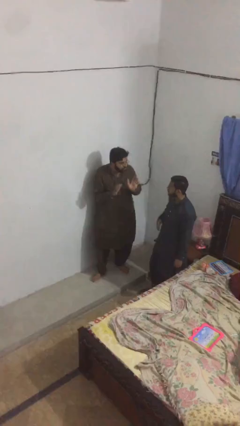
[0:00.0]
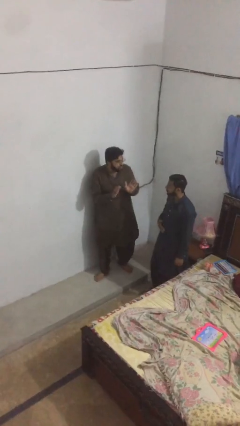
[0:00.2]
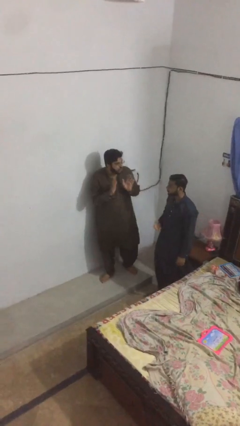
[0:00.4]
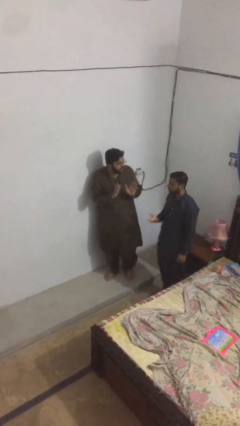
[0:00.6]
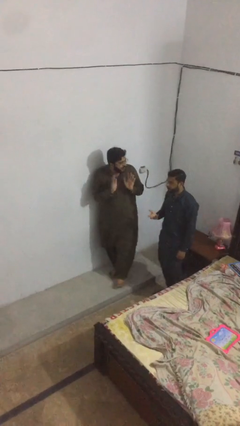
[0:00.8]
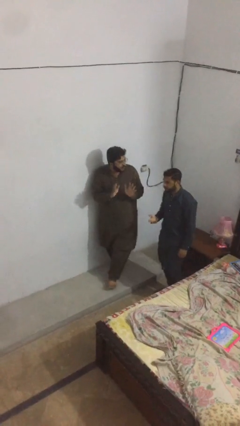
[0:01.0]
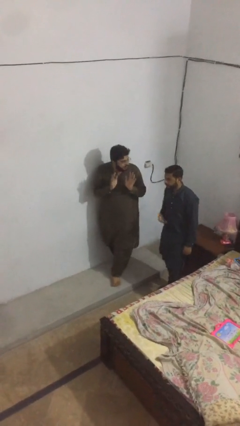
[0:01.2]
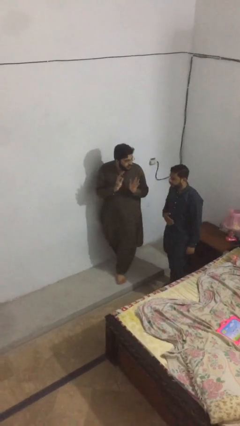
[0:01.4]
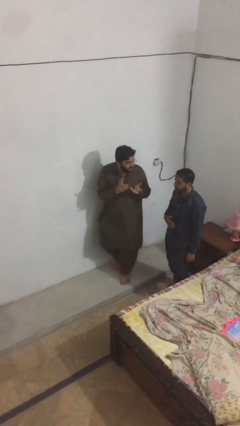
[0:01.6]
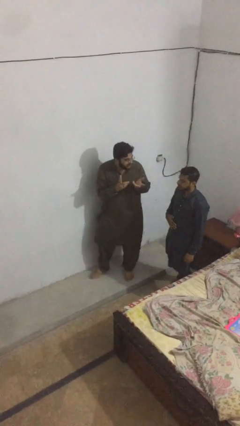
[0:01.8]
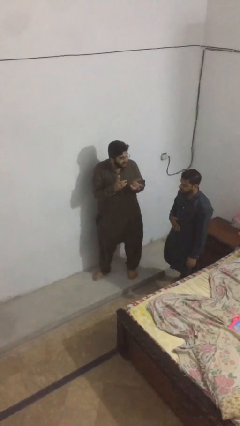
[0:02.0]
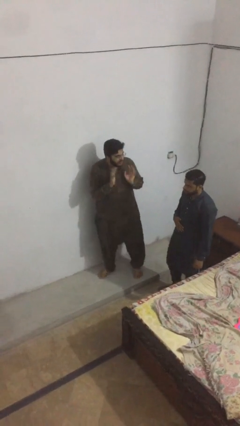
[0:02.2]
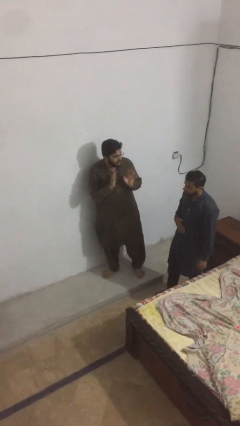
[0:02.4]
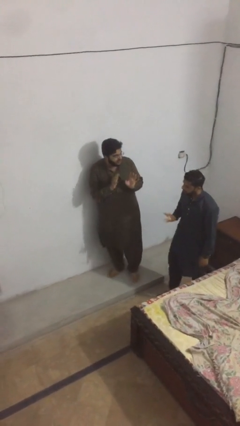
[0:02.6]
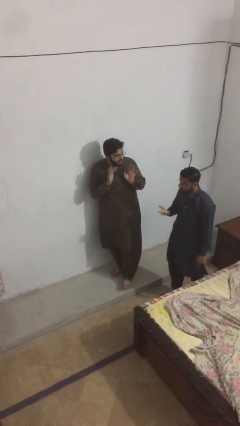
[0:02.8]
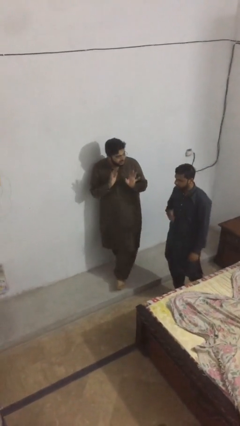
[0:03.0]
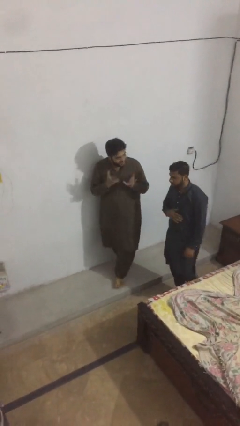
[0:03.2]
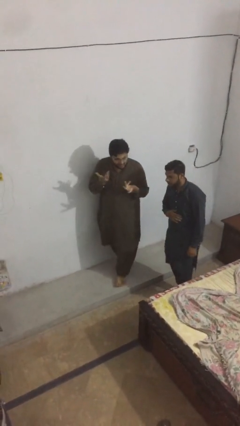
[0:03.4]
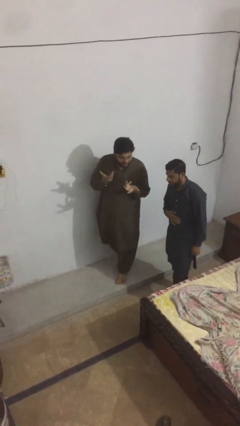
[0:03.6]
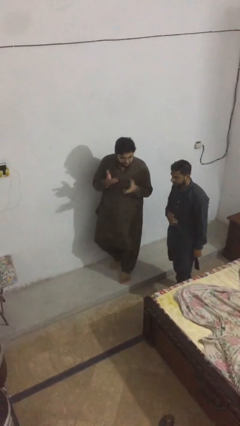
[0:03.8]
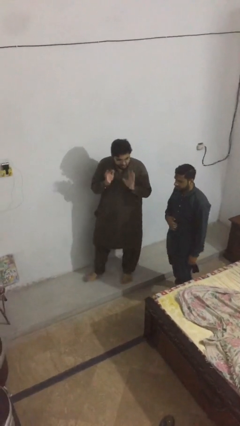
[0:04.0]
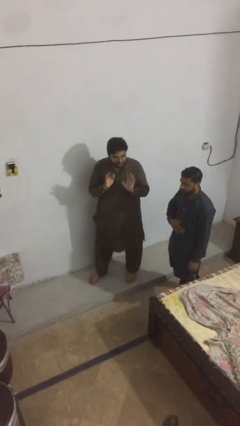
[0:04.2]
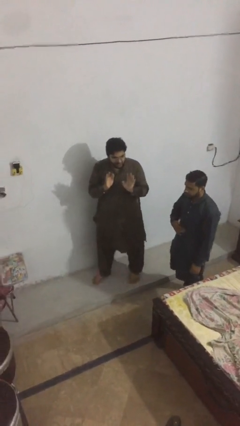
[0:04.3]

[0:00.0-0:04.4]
person talks to person

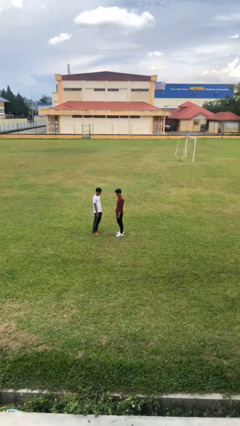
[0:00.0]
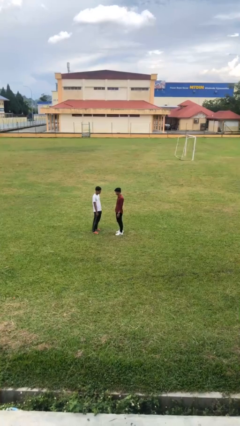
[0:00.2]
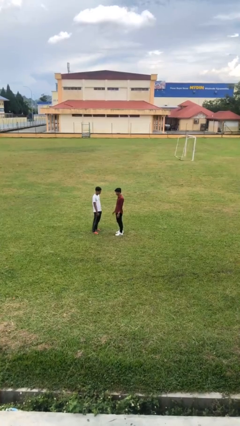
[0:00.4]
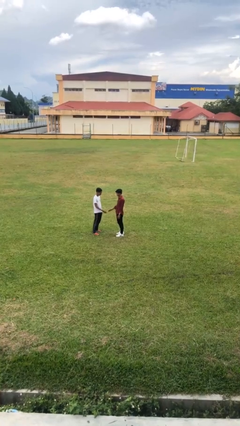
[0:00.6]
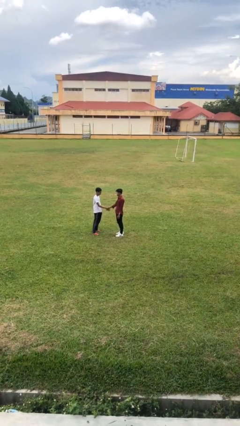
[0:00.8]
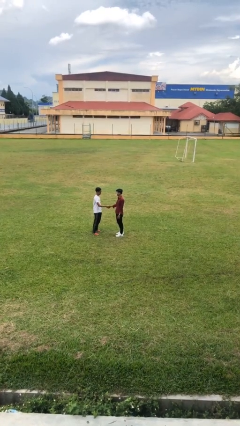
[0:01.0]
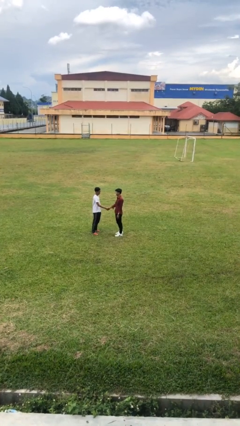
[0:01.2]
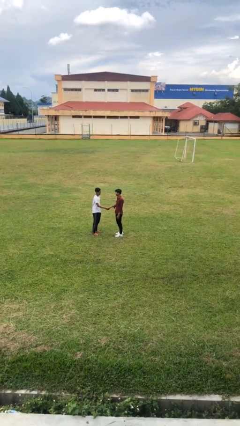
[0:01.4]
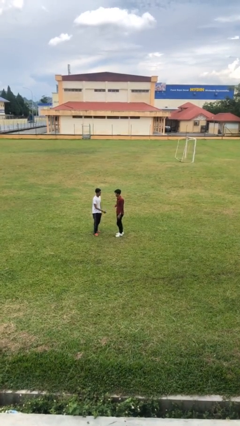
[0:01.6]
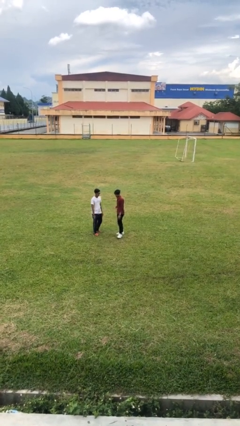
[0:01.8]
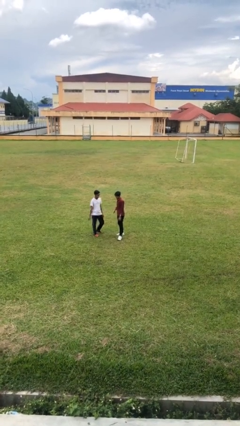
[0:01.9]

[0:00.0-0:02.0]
person shakes hand

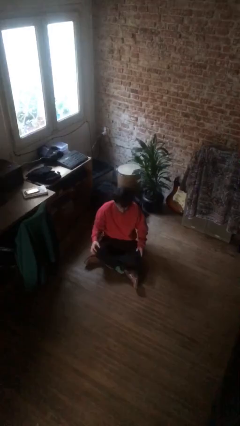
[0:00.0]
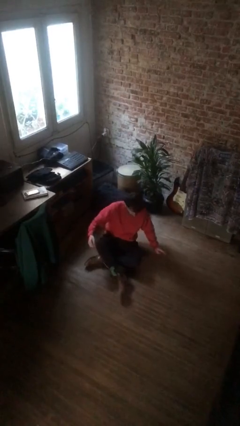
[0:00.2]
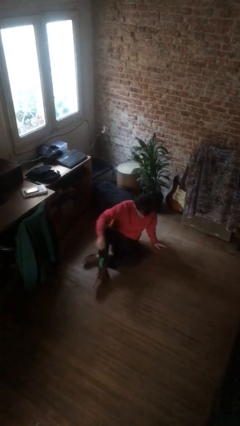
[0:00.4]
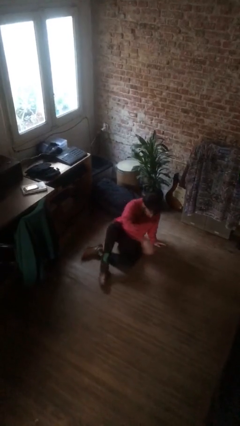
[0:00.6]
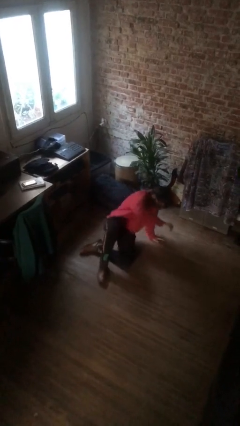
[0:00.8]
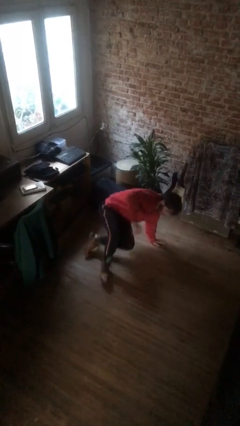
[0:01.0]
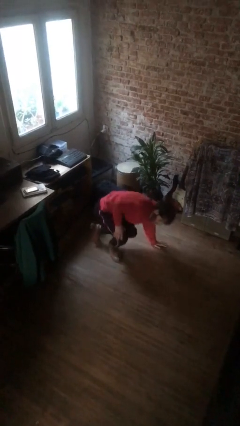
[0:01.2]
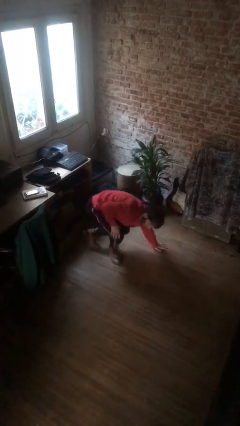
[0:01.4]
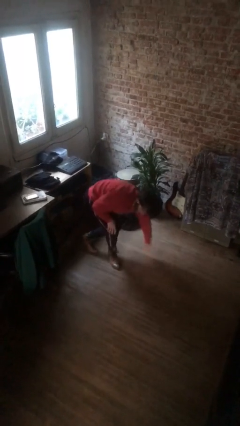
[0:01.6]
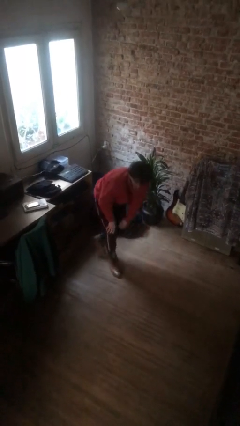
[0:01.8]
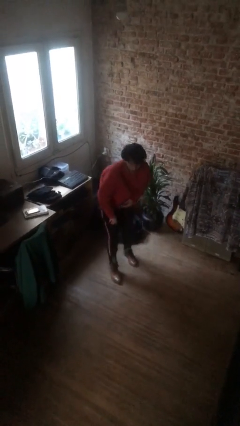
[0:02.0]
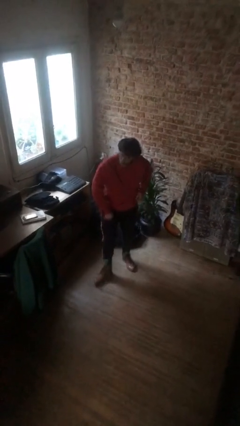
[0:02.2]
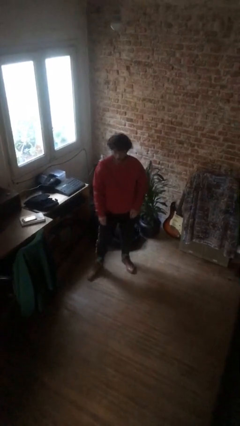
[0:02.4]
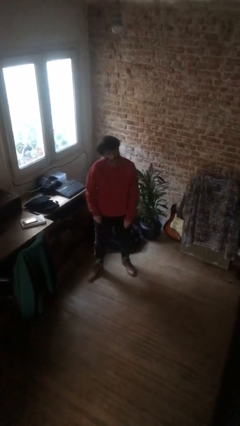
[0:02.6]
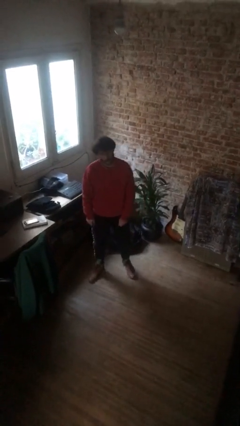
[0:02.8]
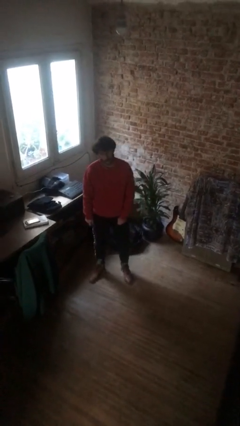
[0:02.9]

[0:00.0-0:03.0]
person stands up from floor

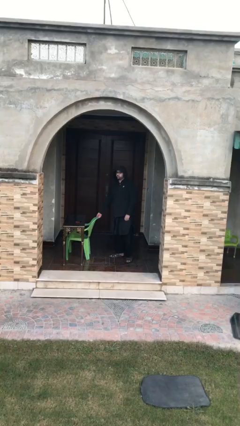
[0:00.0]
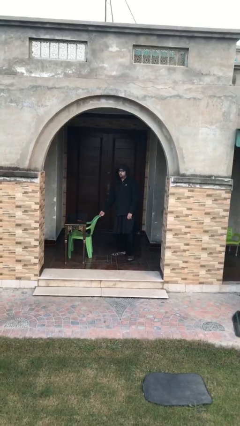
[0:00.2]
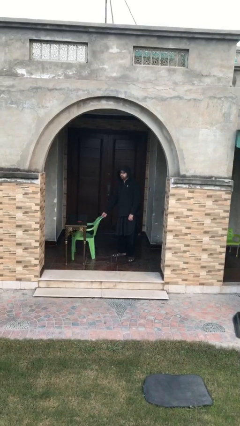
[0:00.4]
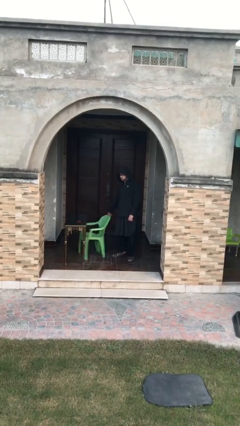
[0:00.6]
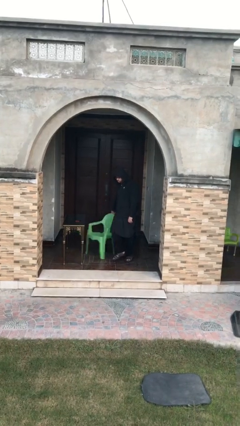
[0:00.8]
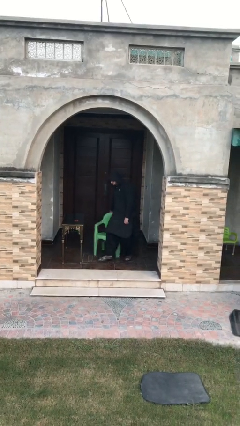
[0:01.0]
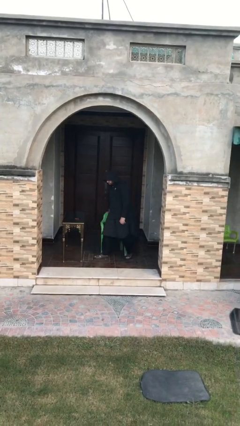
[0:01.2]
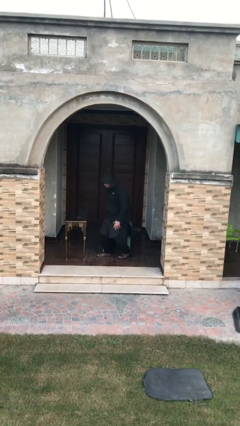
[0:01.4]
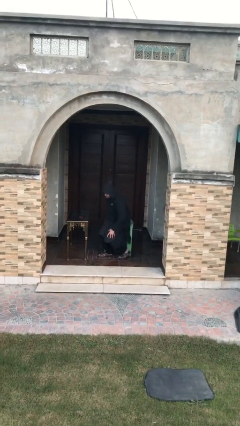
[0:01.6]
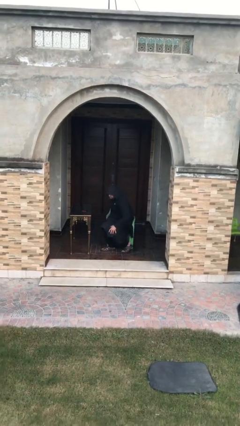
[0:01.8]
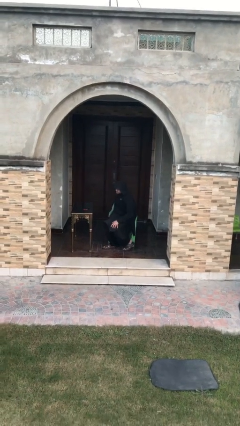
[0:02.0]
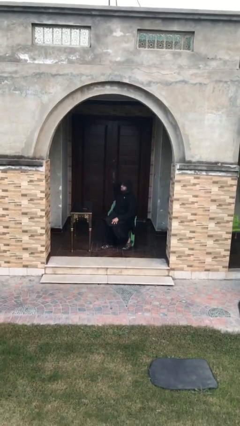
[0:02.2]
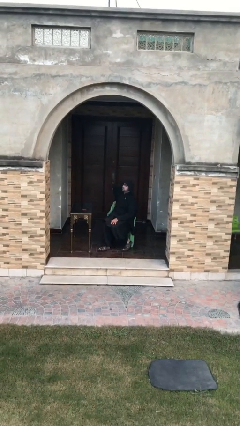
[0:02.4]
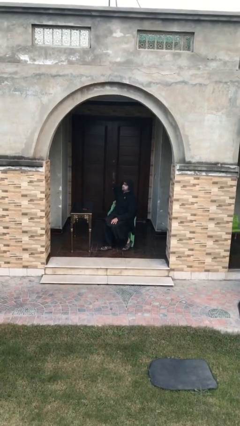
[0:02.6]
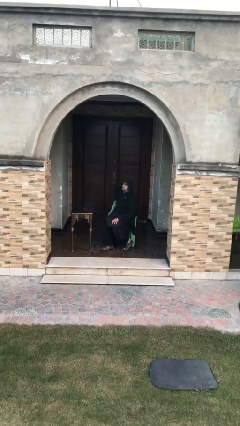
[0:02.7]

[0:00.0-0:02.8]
person sits down

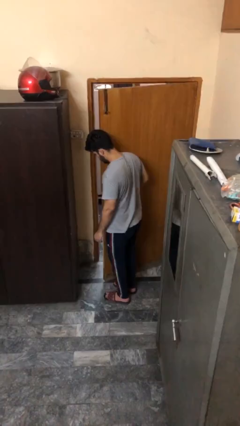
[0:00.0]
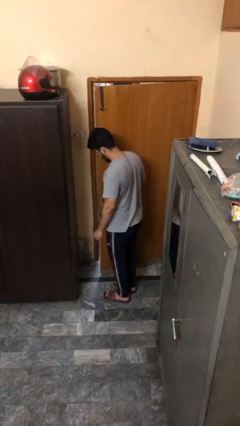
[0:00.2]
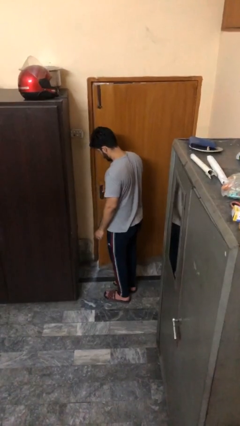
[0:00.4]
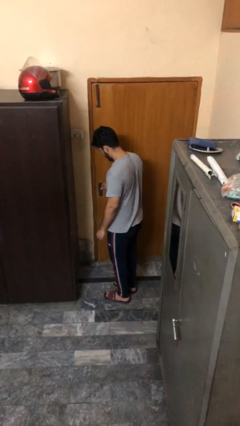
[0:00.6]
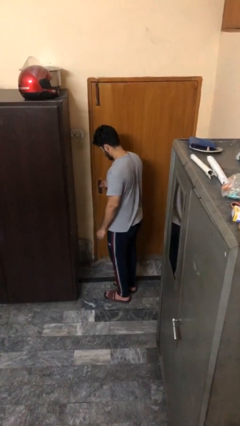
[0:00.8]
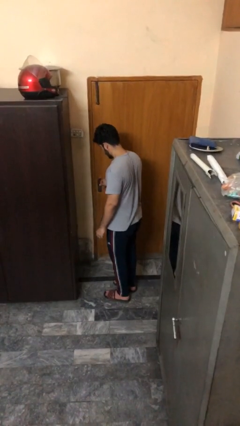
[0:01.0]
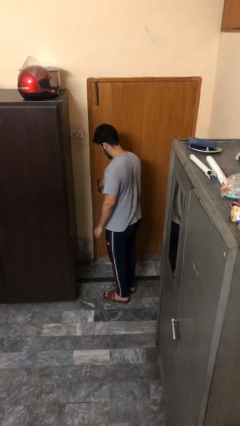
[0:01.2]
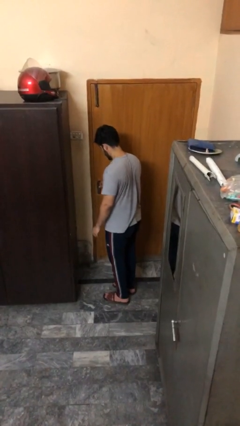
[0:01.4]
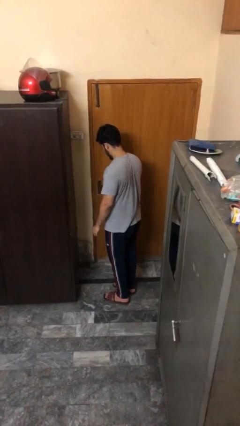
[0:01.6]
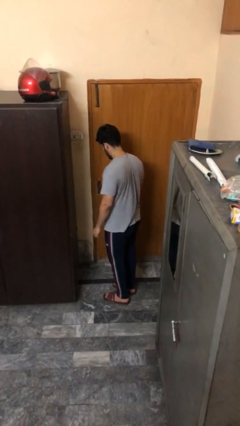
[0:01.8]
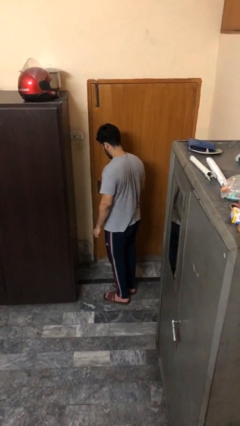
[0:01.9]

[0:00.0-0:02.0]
person closes facility door

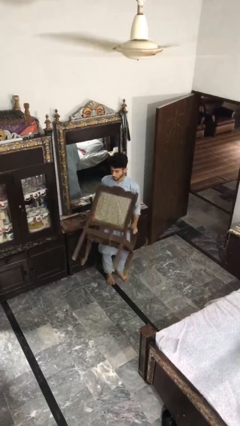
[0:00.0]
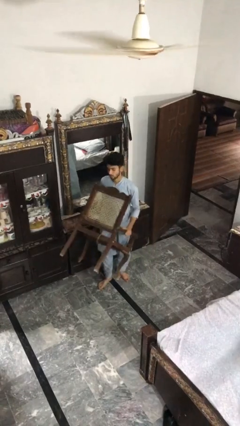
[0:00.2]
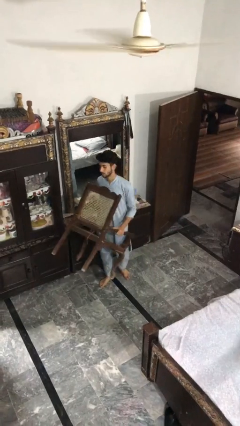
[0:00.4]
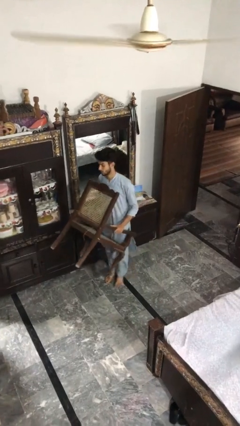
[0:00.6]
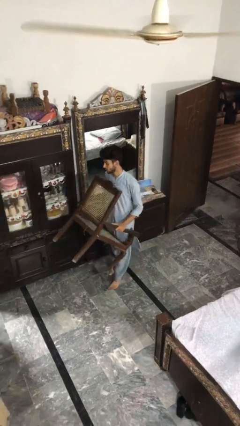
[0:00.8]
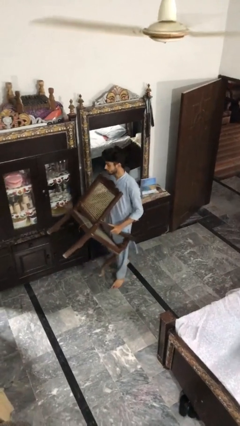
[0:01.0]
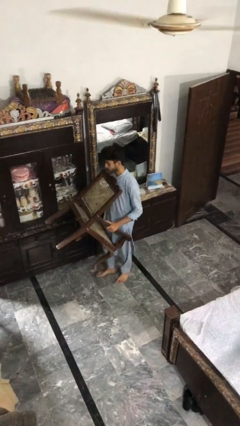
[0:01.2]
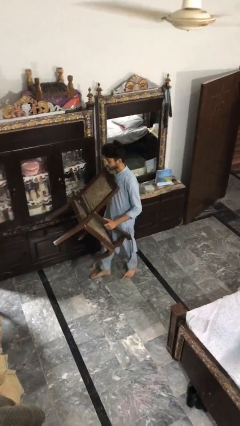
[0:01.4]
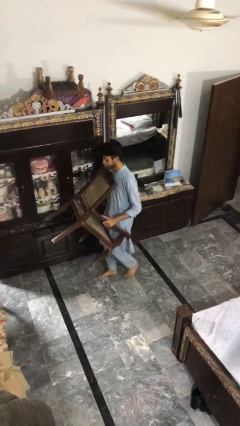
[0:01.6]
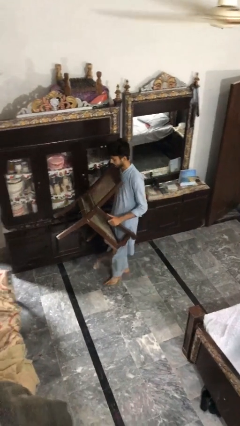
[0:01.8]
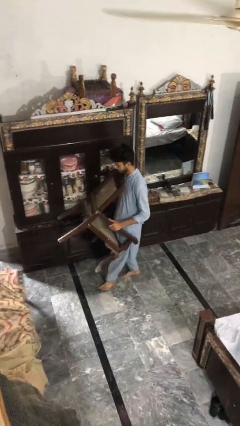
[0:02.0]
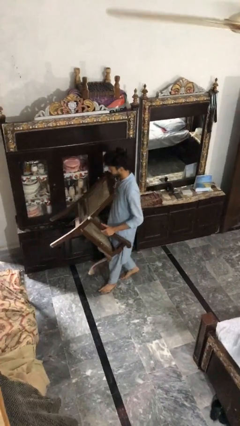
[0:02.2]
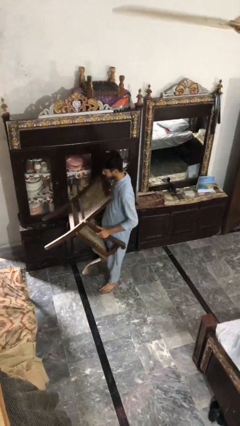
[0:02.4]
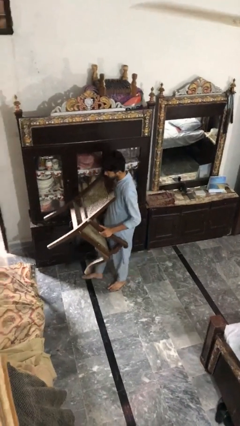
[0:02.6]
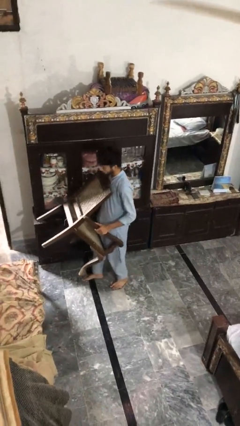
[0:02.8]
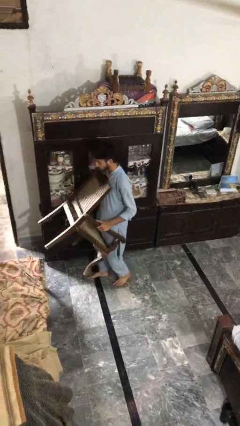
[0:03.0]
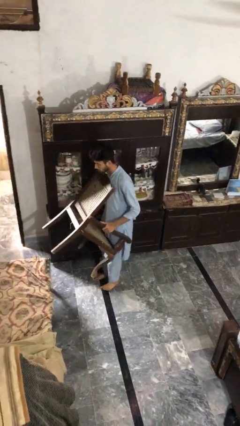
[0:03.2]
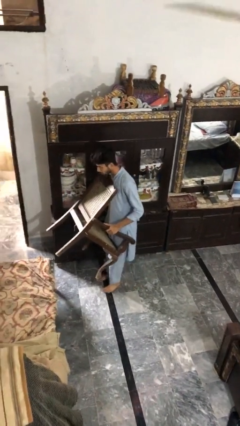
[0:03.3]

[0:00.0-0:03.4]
person carries heavy object
